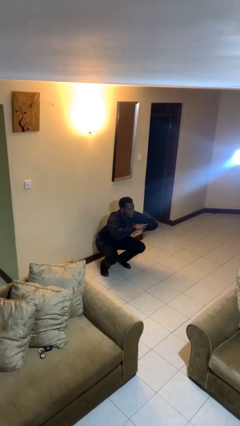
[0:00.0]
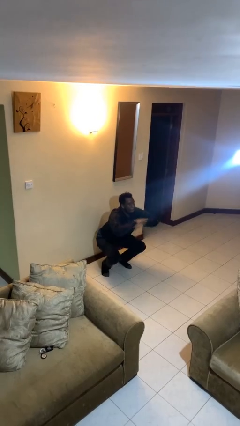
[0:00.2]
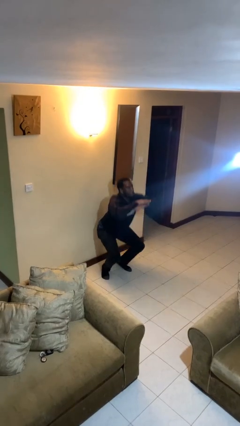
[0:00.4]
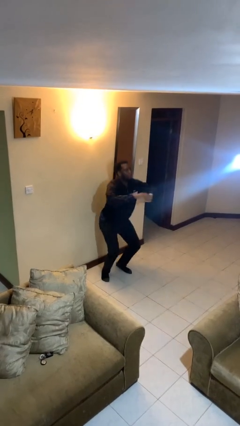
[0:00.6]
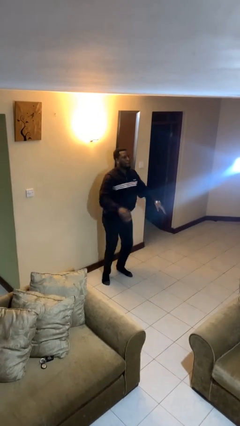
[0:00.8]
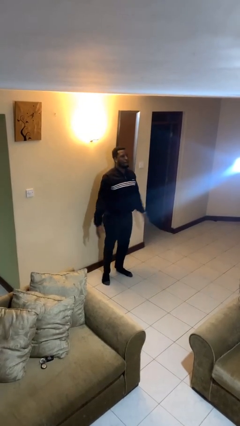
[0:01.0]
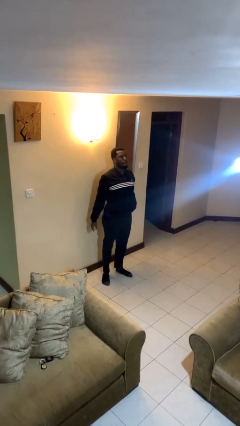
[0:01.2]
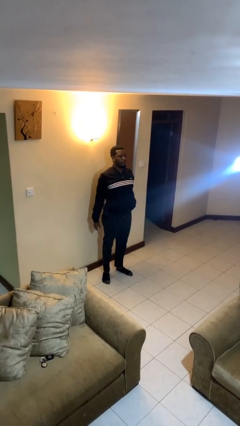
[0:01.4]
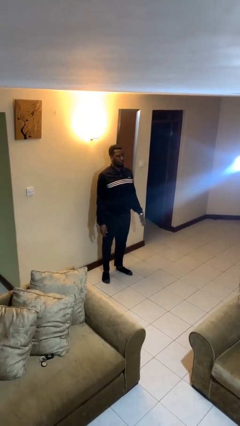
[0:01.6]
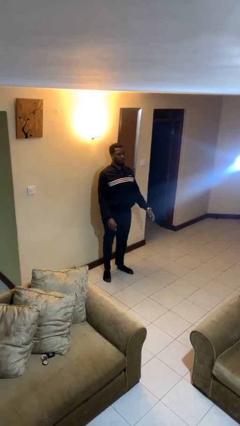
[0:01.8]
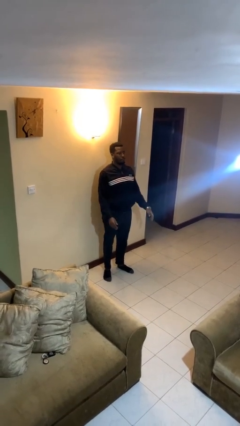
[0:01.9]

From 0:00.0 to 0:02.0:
person stands up

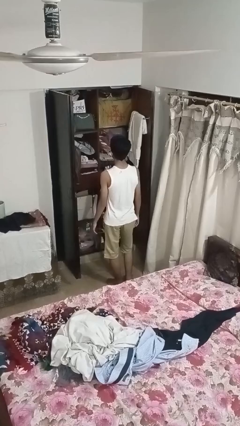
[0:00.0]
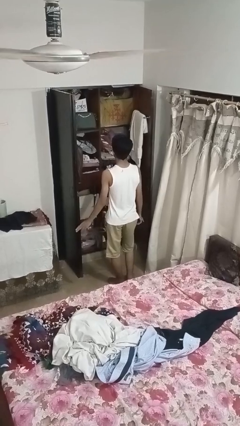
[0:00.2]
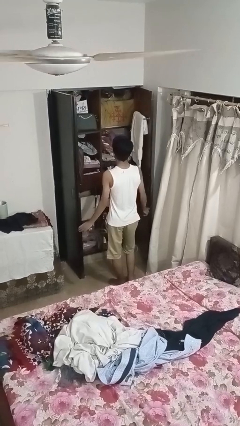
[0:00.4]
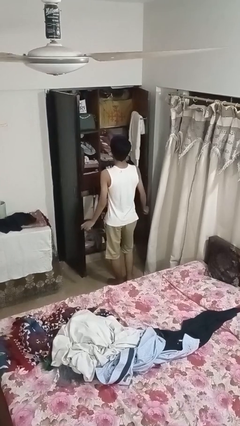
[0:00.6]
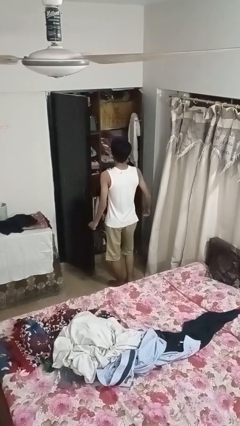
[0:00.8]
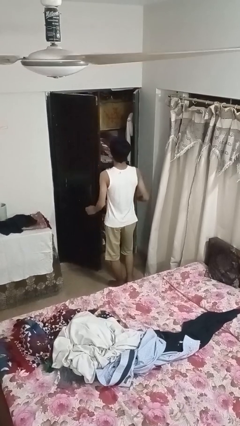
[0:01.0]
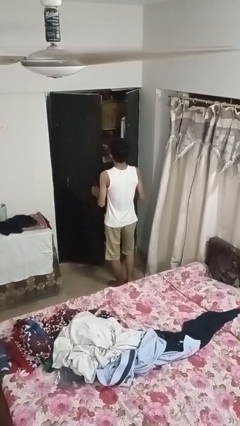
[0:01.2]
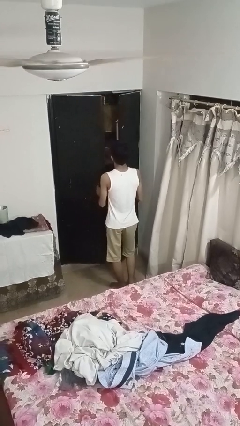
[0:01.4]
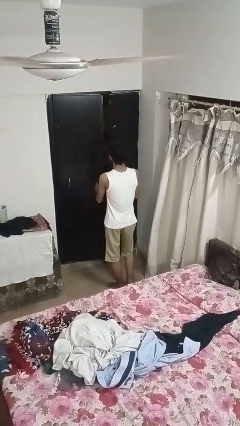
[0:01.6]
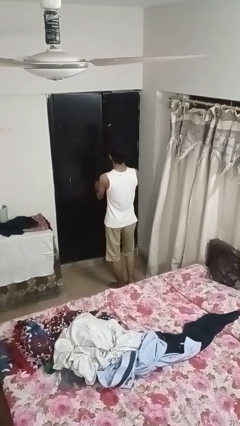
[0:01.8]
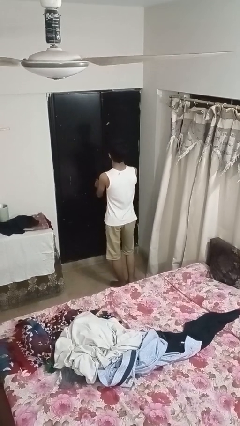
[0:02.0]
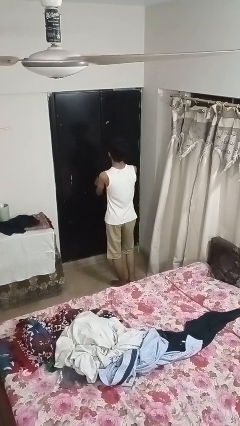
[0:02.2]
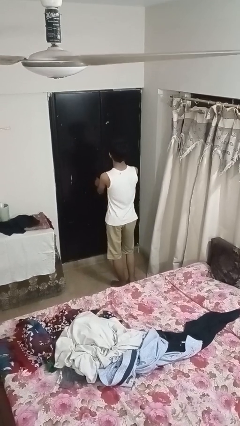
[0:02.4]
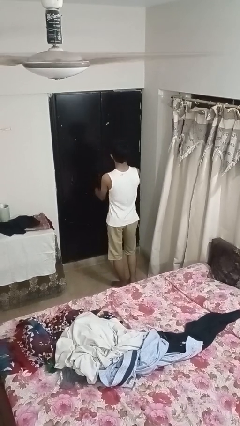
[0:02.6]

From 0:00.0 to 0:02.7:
person closes closet door

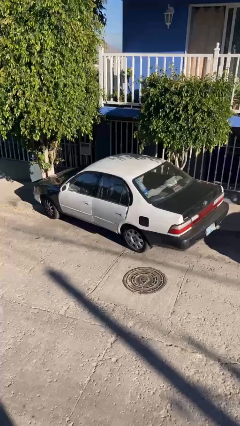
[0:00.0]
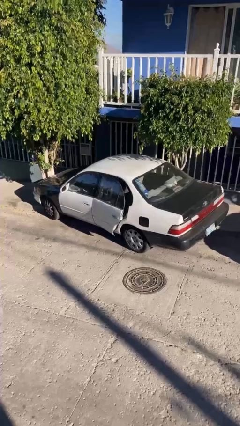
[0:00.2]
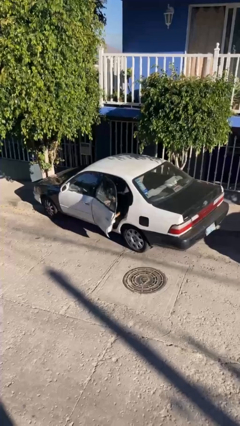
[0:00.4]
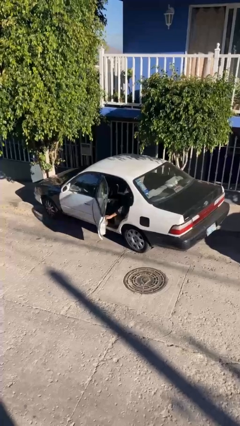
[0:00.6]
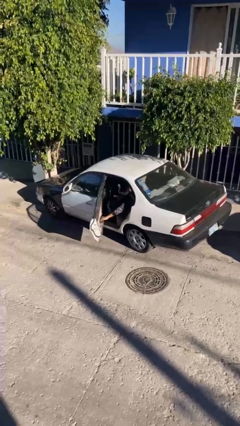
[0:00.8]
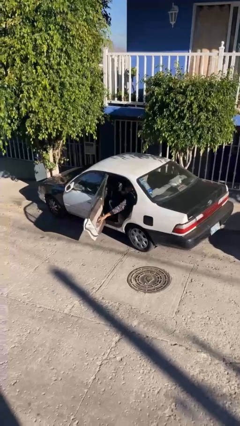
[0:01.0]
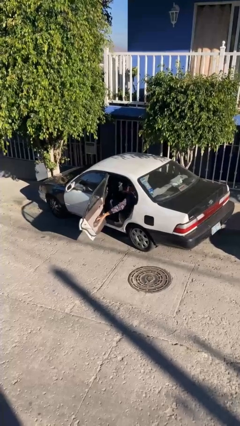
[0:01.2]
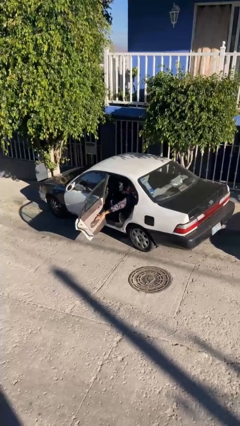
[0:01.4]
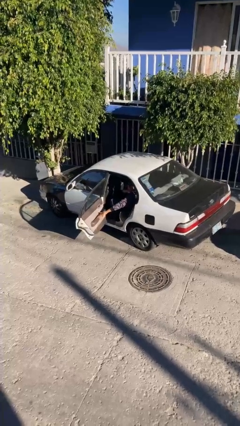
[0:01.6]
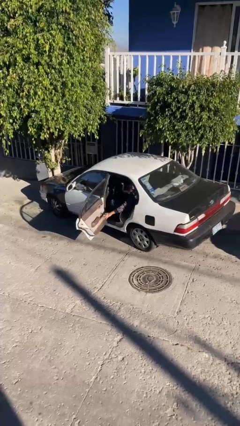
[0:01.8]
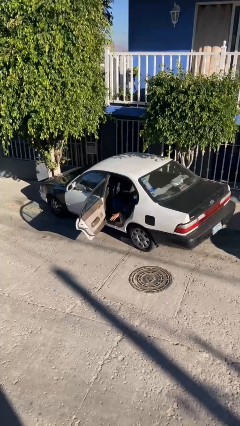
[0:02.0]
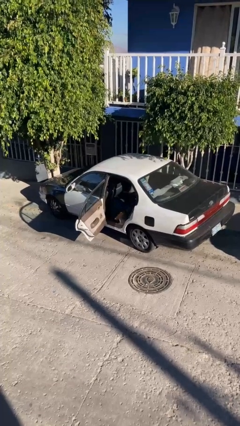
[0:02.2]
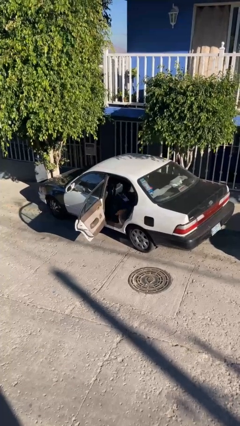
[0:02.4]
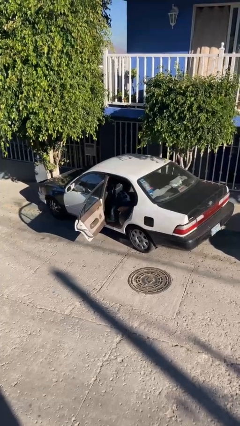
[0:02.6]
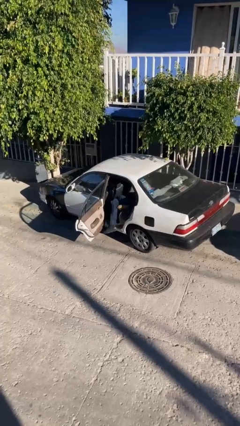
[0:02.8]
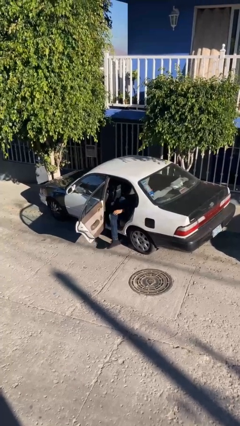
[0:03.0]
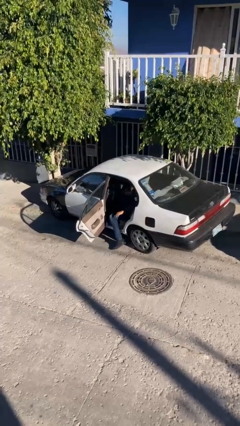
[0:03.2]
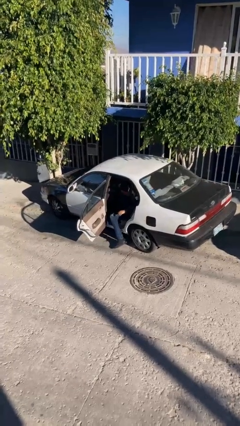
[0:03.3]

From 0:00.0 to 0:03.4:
person opens car door

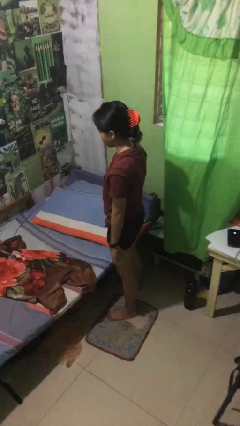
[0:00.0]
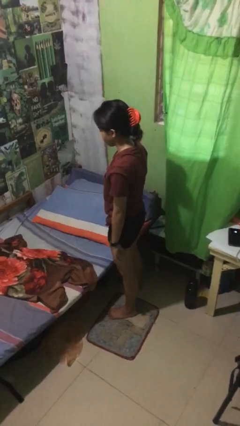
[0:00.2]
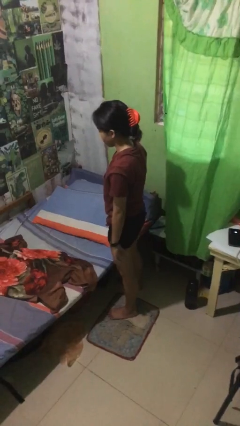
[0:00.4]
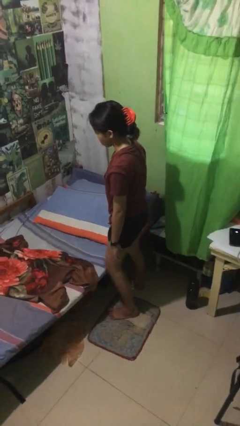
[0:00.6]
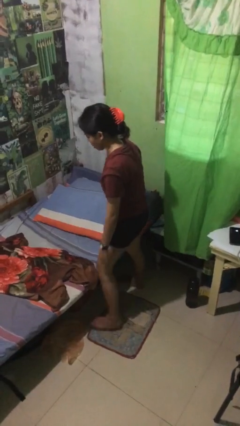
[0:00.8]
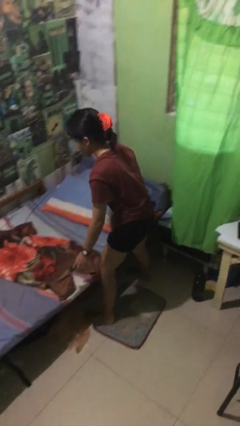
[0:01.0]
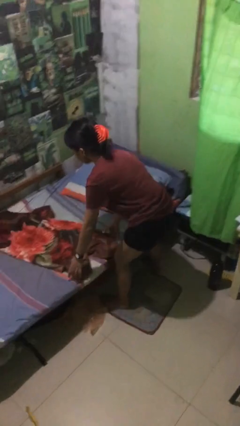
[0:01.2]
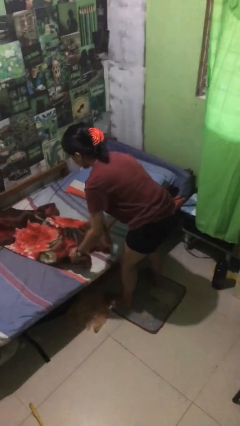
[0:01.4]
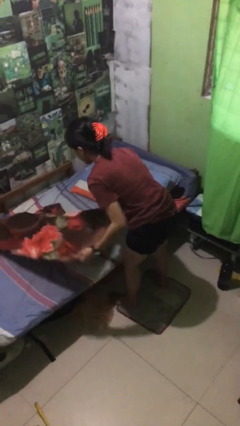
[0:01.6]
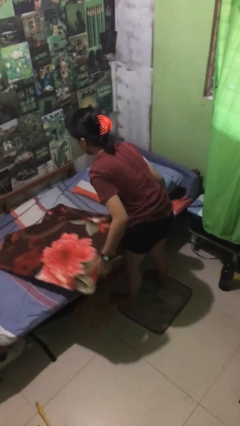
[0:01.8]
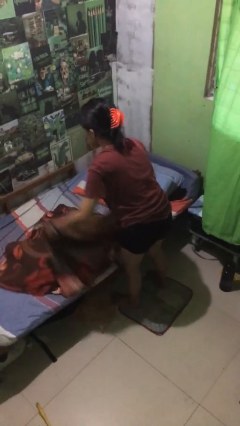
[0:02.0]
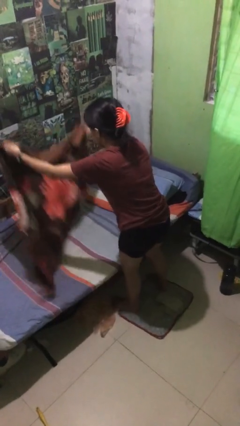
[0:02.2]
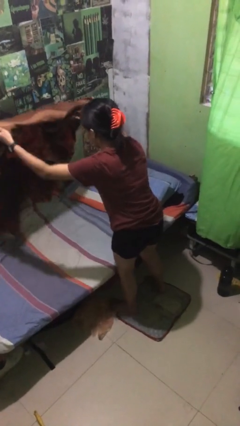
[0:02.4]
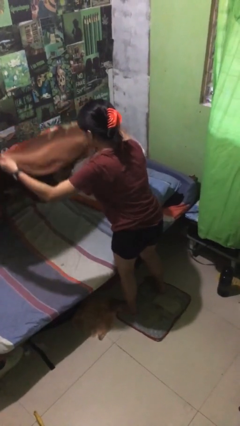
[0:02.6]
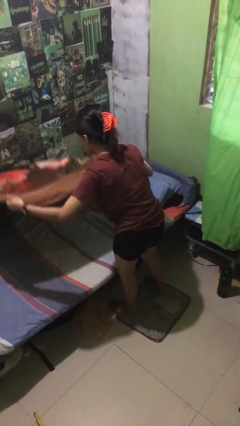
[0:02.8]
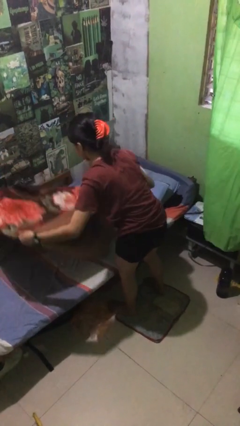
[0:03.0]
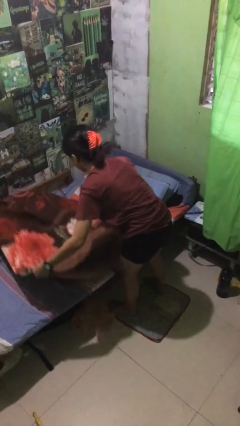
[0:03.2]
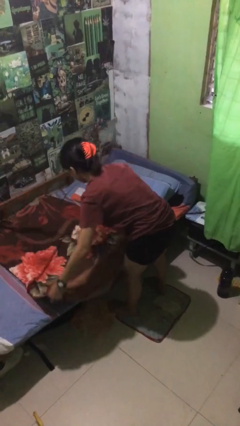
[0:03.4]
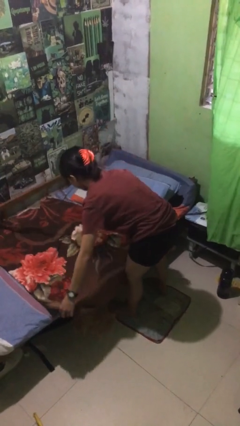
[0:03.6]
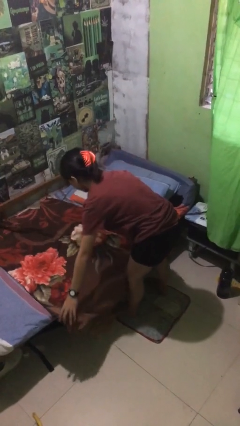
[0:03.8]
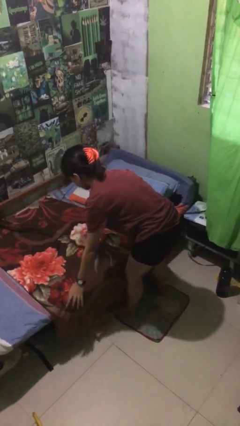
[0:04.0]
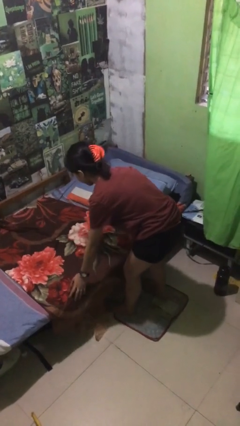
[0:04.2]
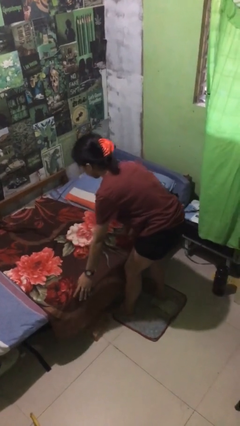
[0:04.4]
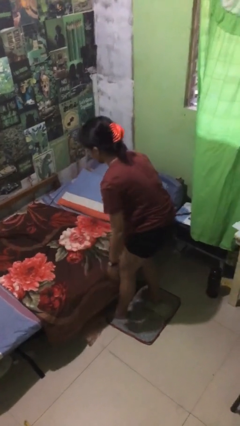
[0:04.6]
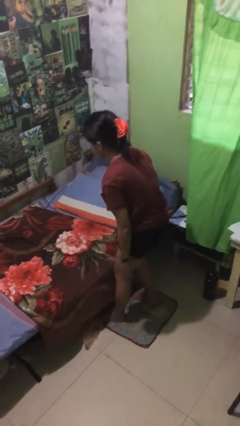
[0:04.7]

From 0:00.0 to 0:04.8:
person makes bed

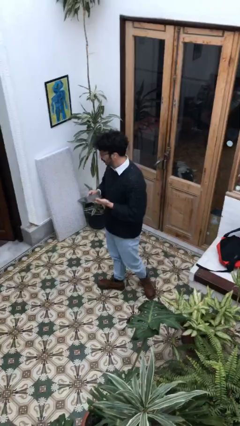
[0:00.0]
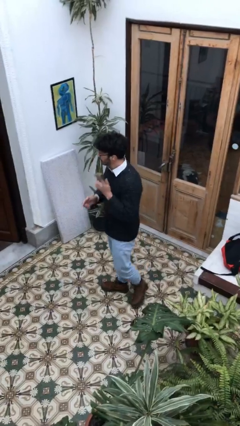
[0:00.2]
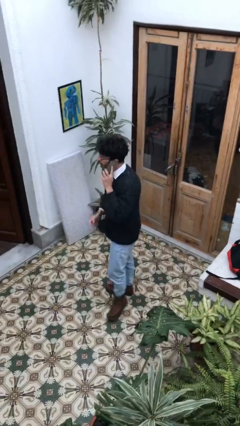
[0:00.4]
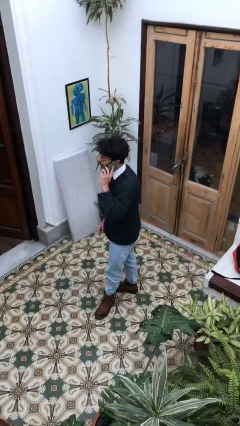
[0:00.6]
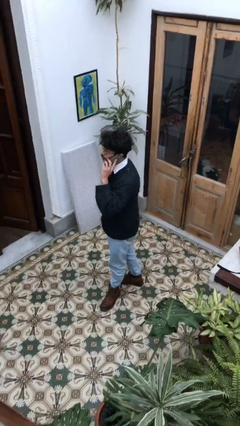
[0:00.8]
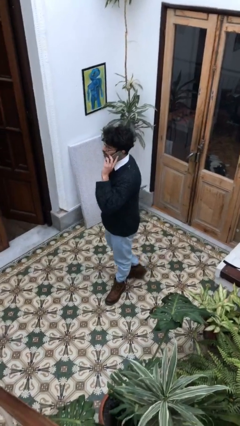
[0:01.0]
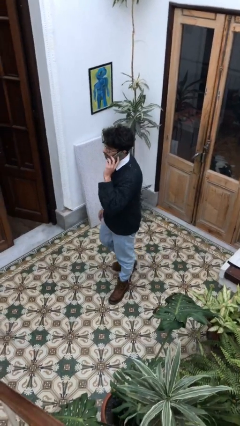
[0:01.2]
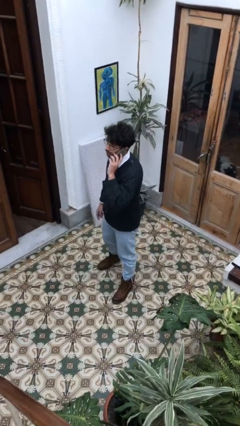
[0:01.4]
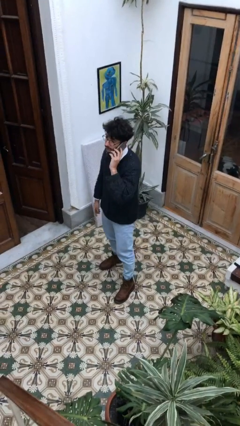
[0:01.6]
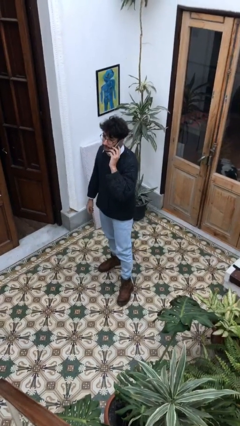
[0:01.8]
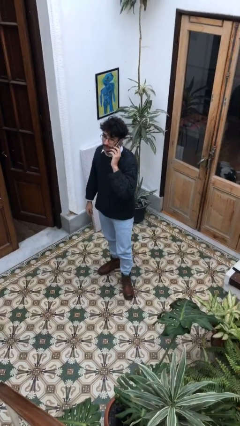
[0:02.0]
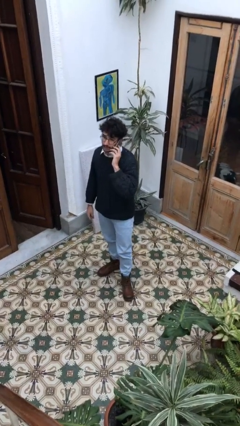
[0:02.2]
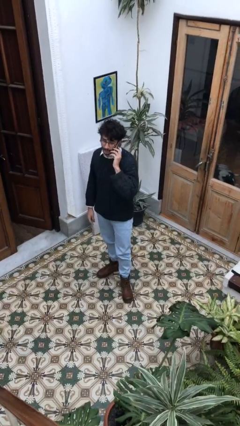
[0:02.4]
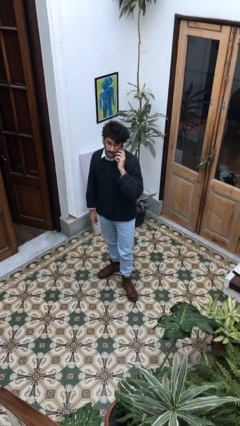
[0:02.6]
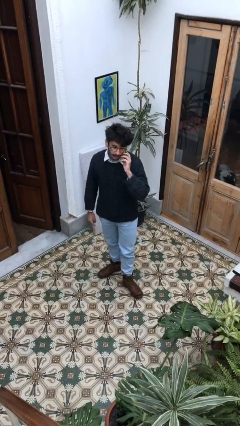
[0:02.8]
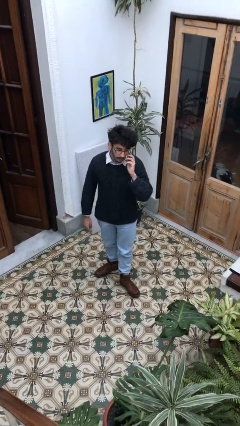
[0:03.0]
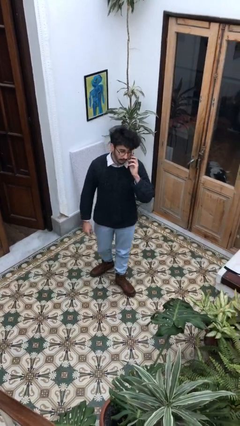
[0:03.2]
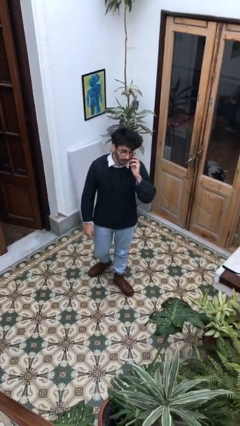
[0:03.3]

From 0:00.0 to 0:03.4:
person talks on phone

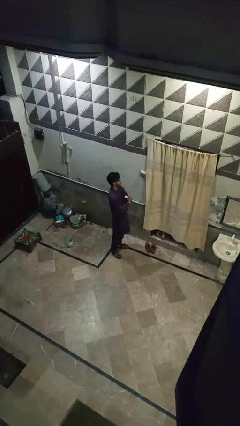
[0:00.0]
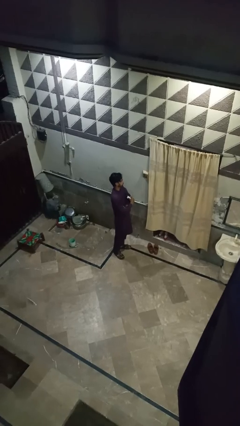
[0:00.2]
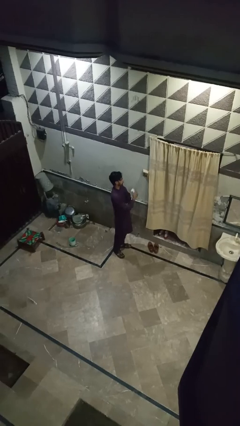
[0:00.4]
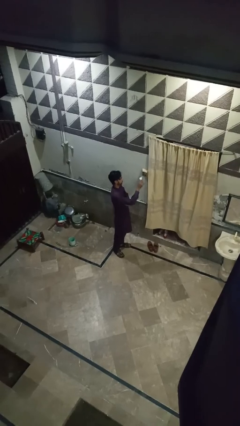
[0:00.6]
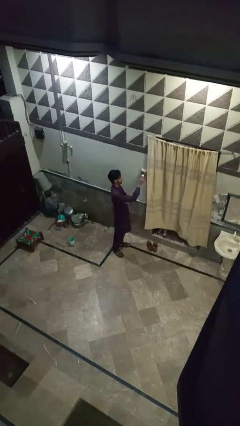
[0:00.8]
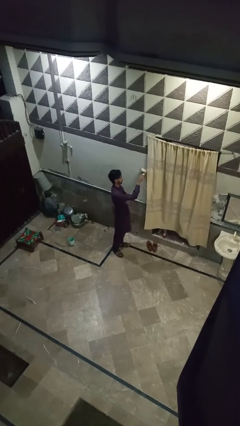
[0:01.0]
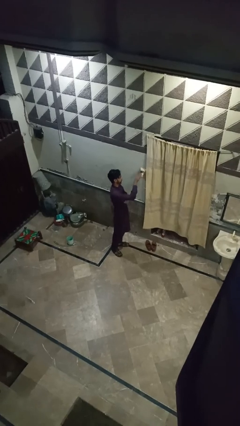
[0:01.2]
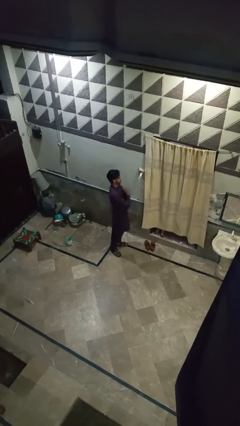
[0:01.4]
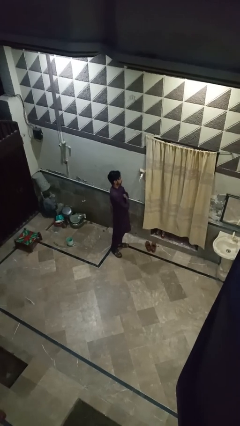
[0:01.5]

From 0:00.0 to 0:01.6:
person plugs into electrical socket
